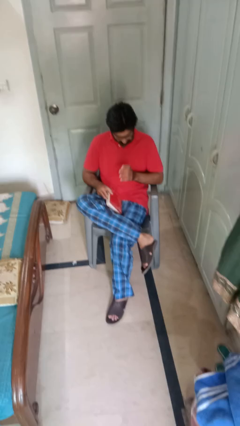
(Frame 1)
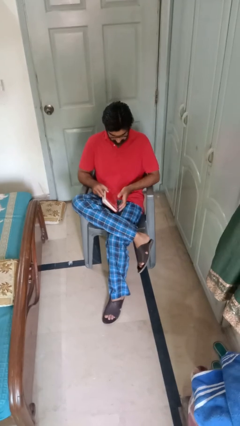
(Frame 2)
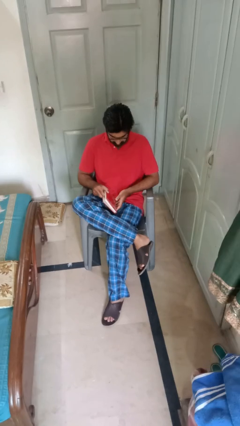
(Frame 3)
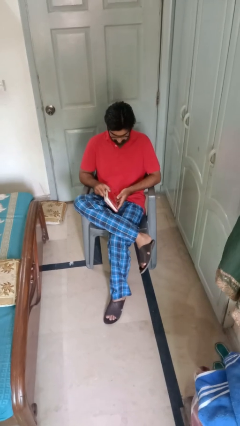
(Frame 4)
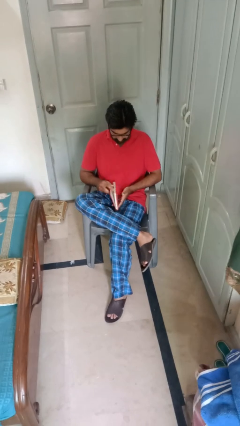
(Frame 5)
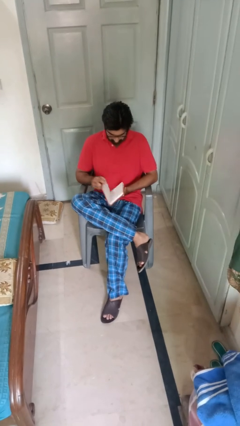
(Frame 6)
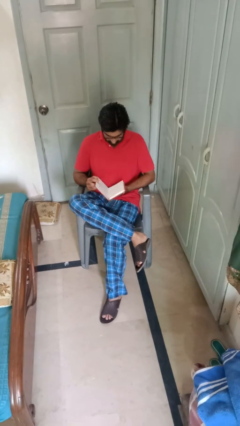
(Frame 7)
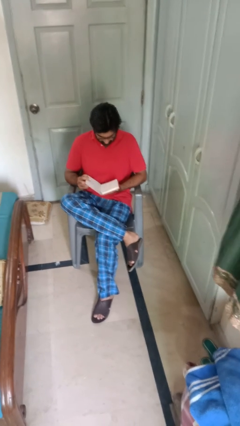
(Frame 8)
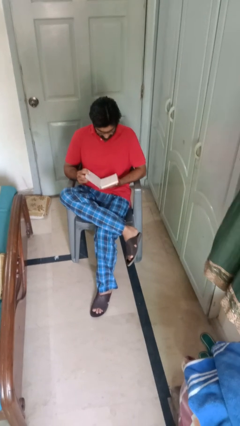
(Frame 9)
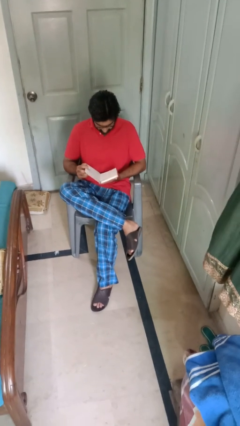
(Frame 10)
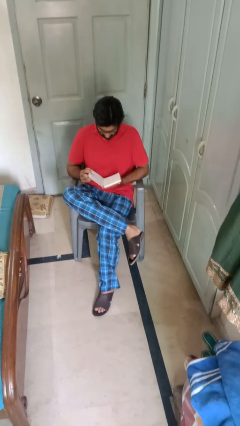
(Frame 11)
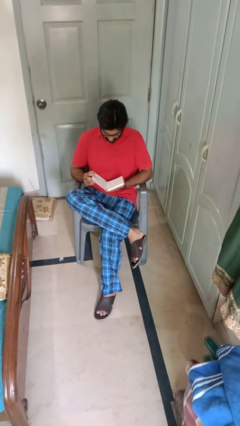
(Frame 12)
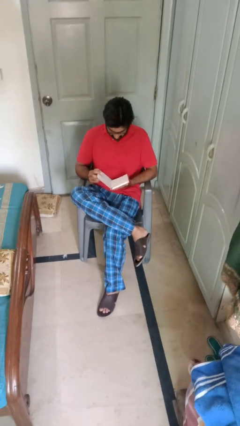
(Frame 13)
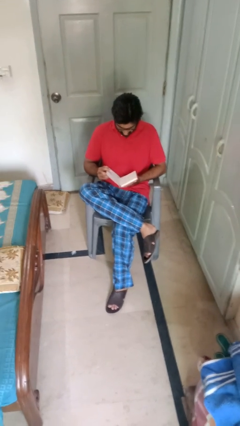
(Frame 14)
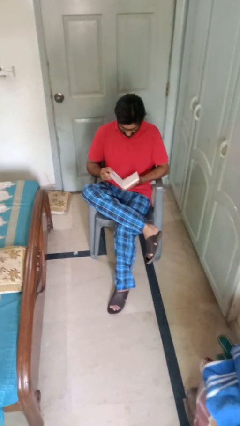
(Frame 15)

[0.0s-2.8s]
person reads book

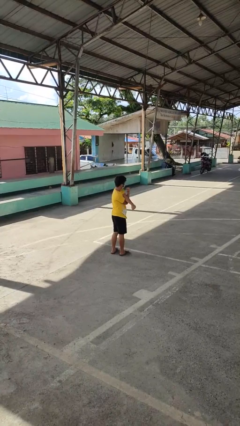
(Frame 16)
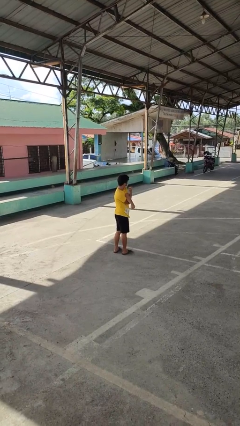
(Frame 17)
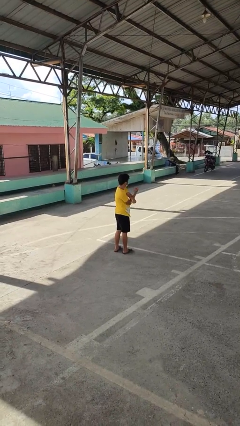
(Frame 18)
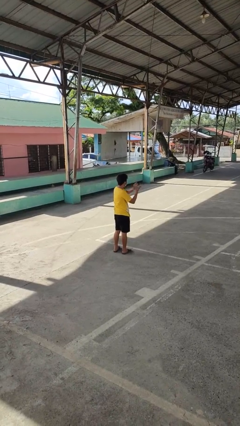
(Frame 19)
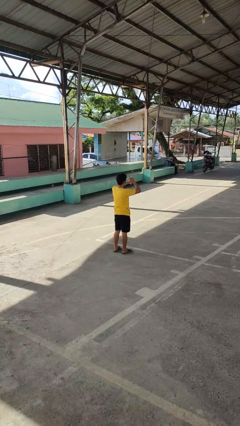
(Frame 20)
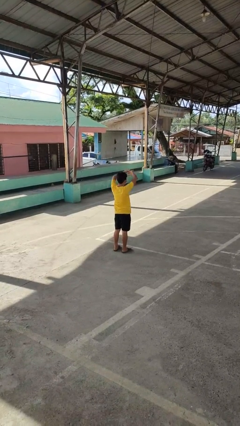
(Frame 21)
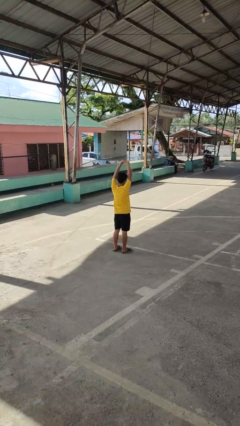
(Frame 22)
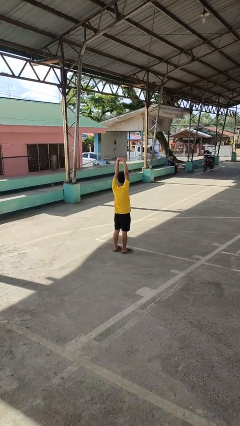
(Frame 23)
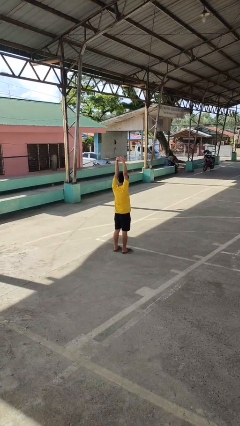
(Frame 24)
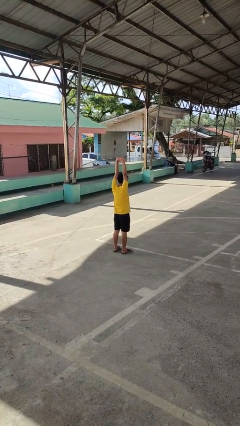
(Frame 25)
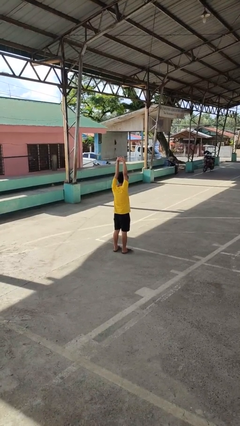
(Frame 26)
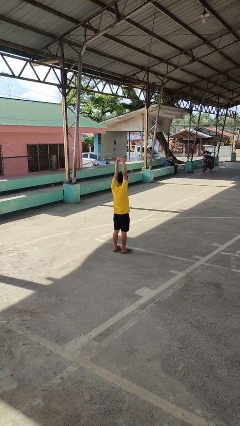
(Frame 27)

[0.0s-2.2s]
person stretches arms over head

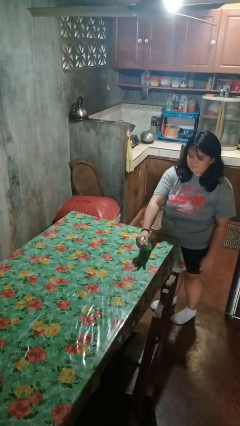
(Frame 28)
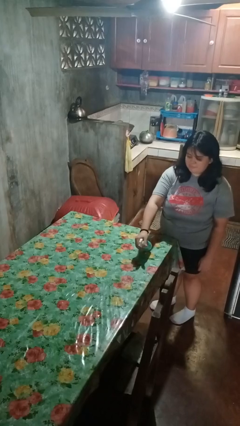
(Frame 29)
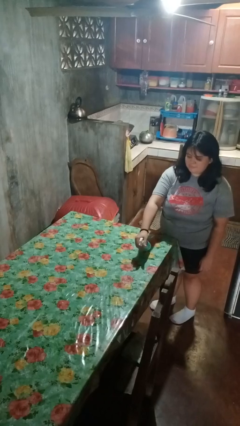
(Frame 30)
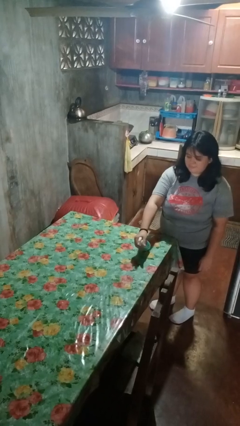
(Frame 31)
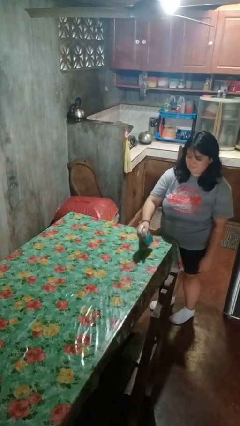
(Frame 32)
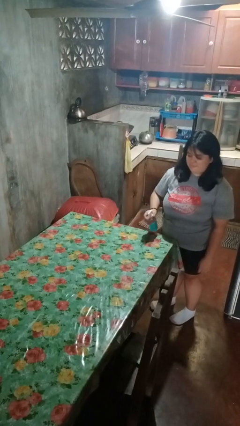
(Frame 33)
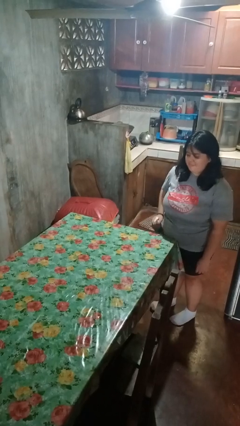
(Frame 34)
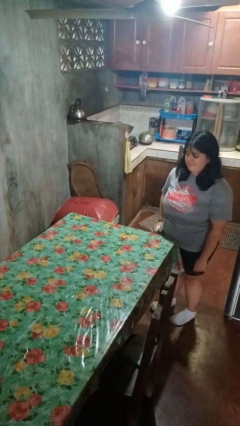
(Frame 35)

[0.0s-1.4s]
person sprays from bottle

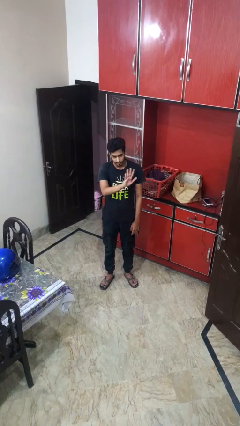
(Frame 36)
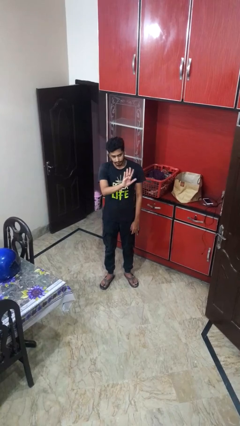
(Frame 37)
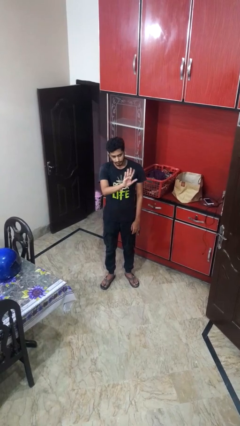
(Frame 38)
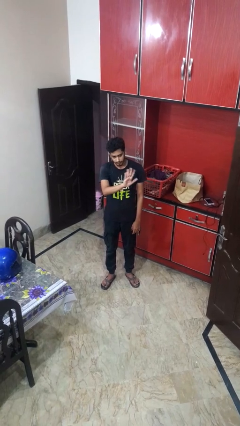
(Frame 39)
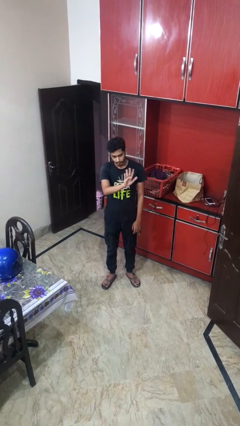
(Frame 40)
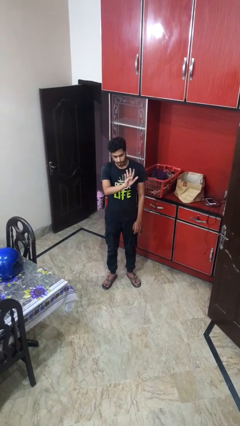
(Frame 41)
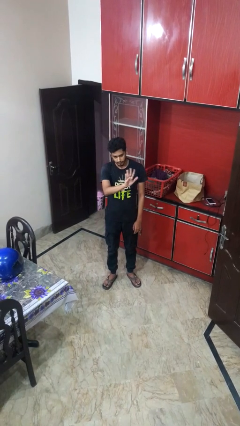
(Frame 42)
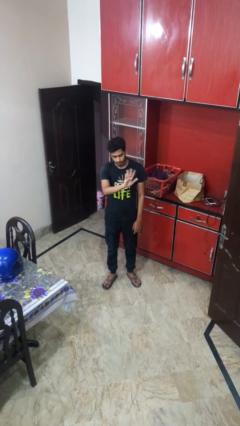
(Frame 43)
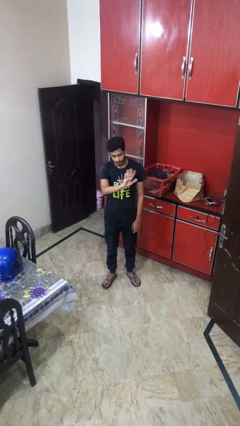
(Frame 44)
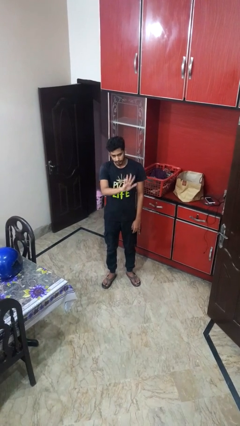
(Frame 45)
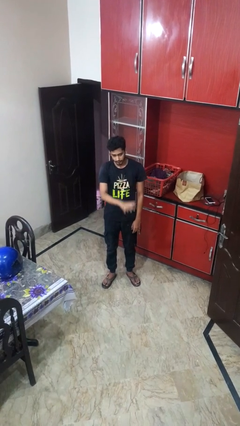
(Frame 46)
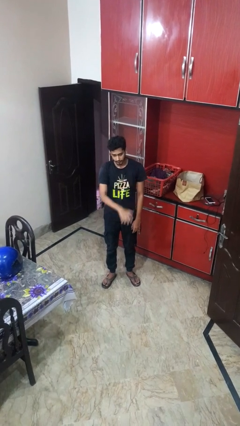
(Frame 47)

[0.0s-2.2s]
person waves at person

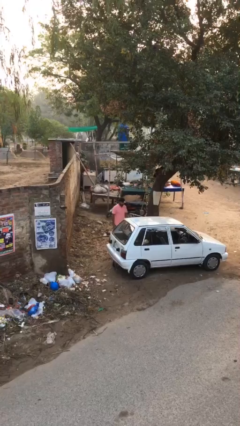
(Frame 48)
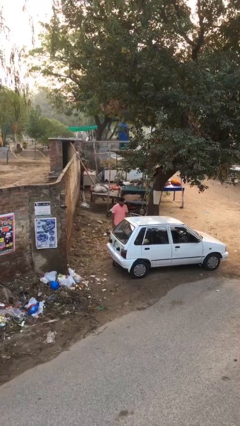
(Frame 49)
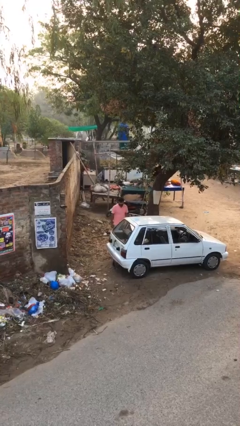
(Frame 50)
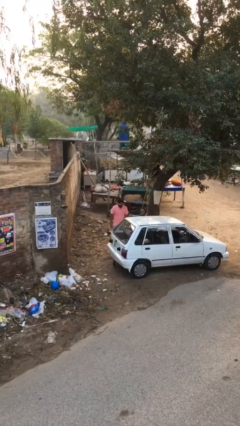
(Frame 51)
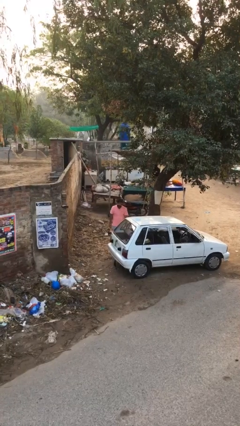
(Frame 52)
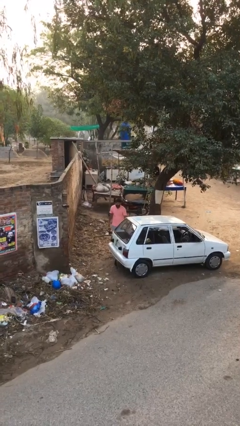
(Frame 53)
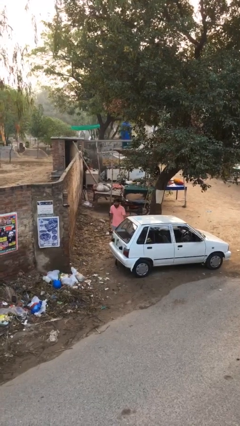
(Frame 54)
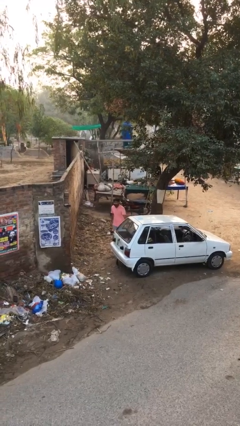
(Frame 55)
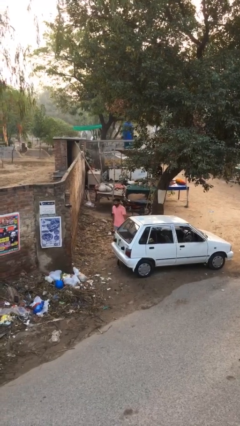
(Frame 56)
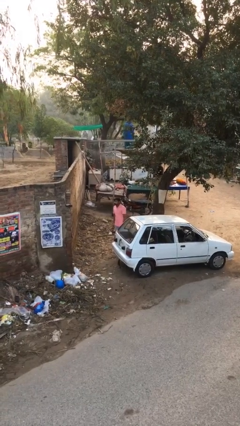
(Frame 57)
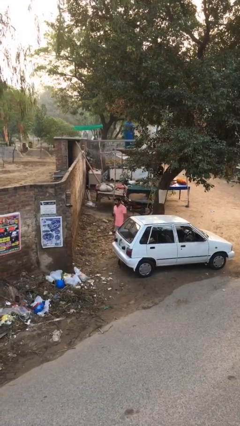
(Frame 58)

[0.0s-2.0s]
person closes car door

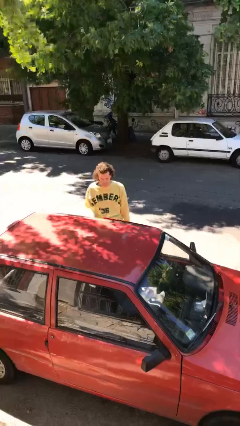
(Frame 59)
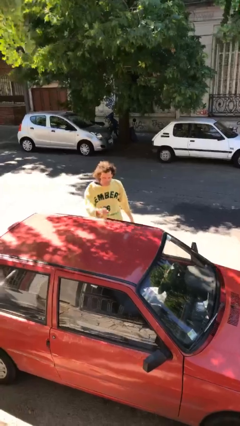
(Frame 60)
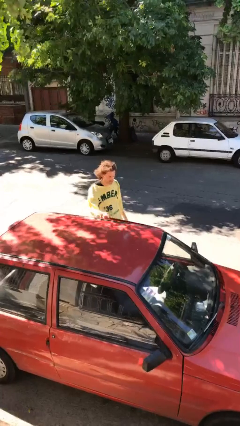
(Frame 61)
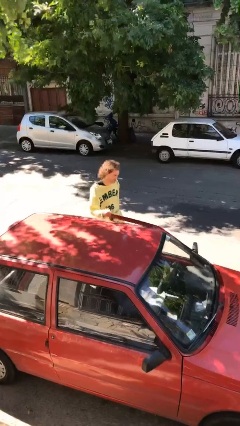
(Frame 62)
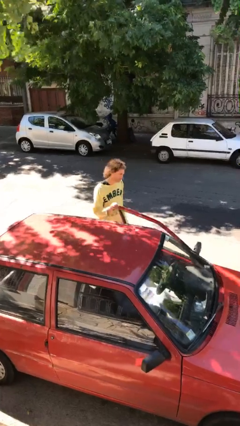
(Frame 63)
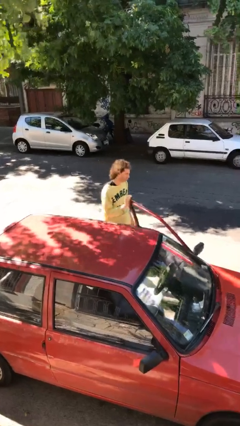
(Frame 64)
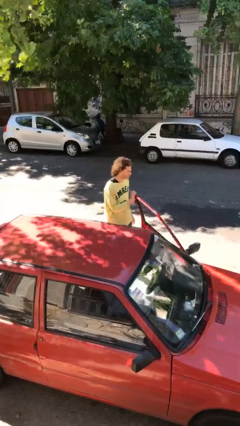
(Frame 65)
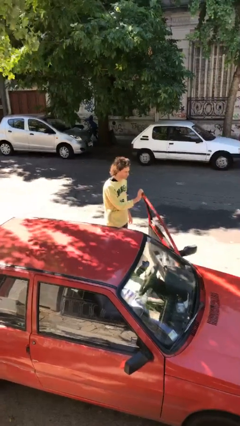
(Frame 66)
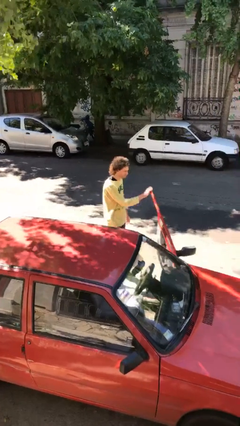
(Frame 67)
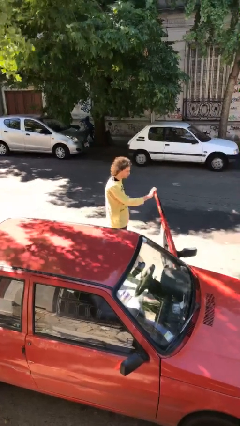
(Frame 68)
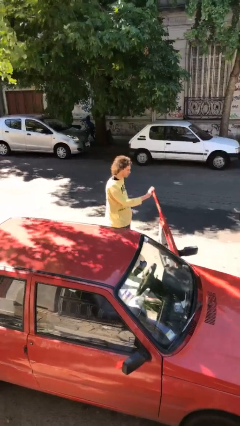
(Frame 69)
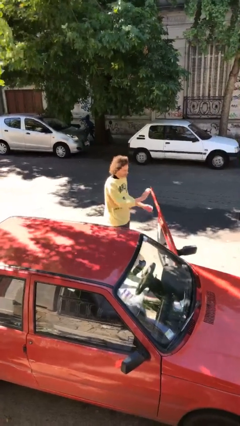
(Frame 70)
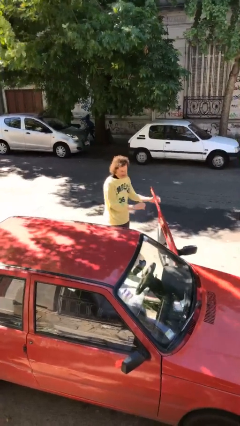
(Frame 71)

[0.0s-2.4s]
person opens car door

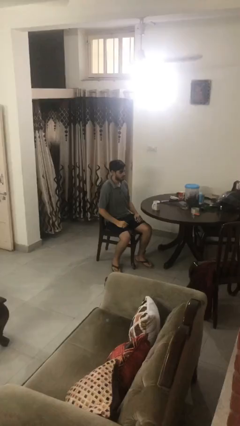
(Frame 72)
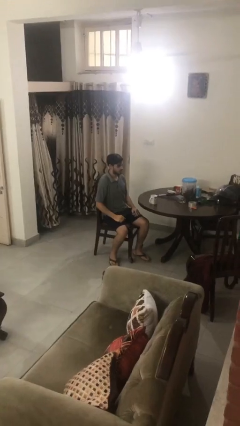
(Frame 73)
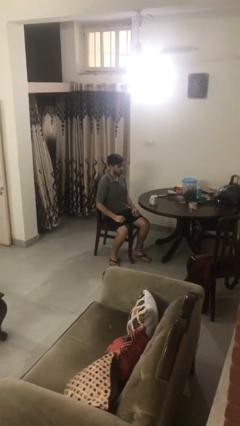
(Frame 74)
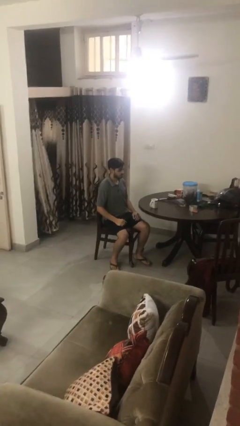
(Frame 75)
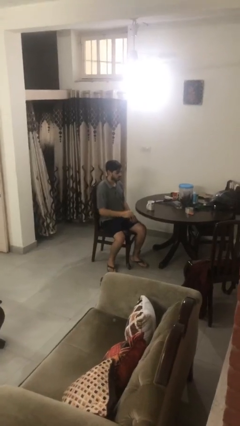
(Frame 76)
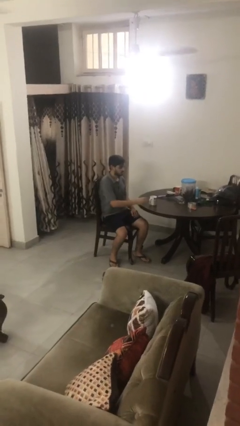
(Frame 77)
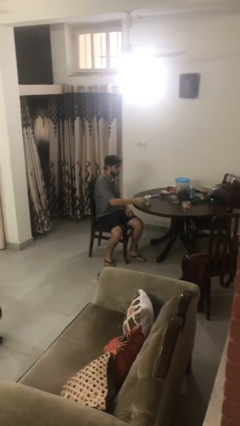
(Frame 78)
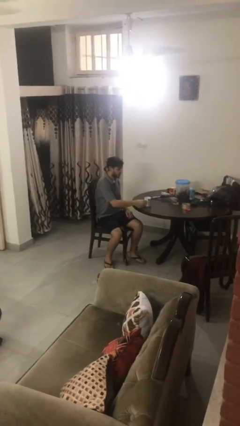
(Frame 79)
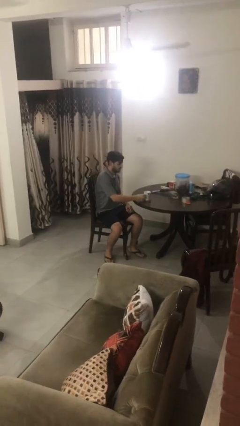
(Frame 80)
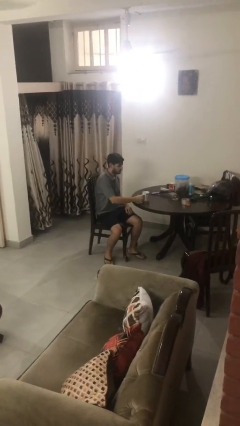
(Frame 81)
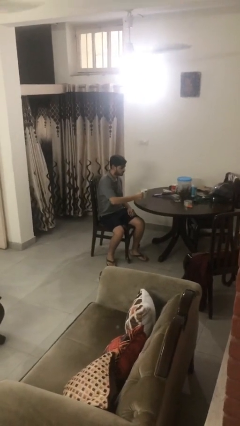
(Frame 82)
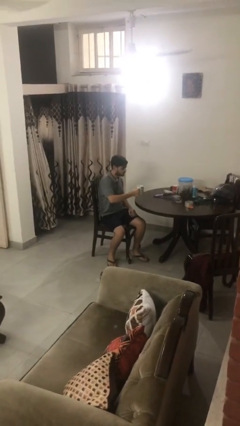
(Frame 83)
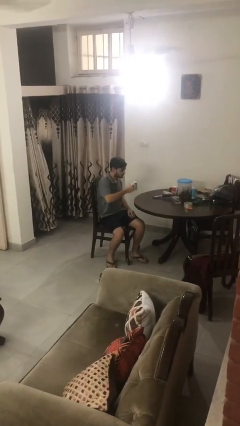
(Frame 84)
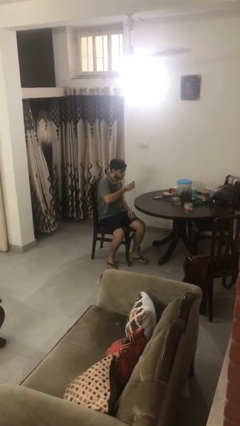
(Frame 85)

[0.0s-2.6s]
person picks up object from table

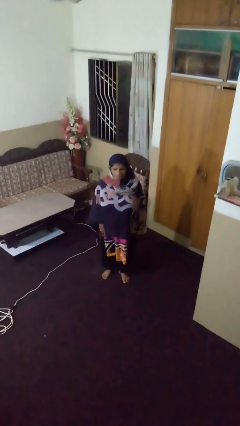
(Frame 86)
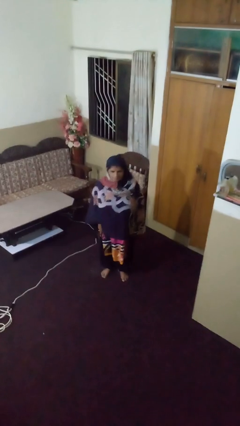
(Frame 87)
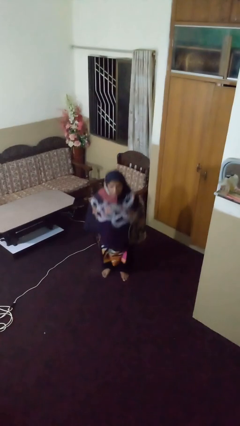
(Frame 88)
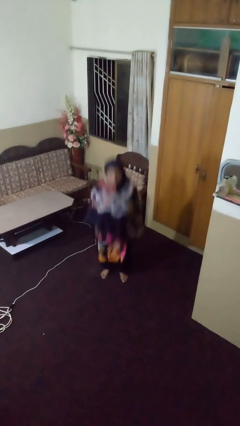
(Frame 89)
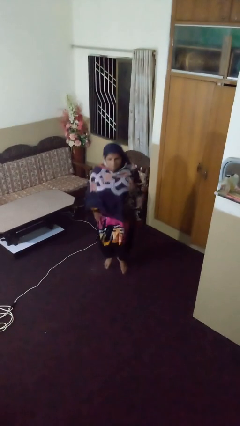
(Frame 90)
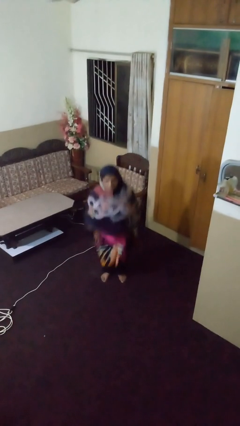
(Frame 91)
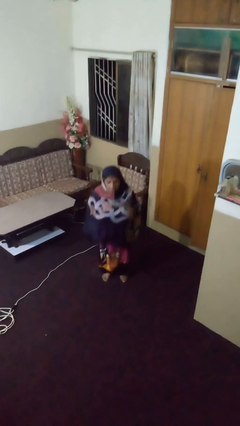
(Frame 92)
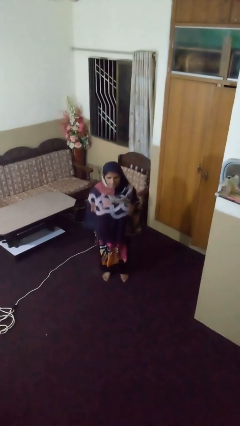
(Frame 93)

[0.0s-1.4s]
person jumps

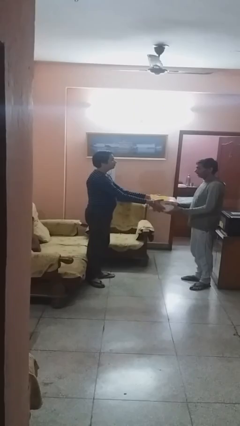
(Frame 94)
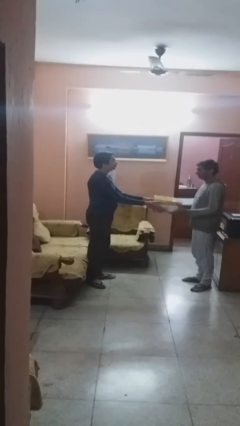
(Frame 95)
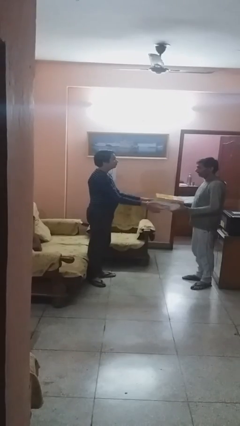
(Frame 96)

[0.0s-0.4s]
person transfers object to person
